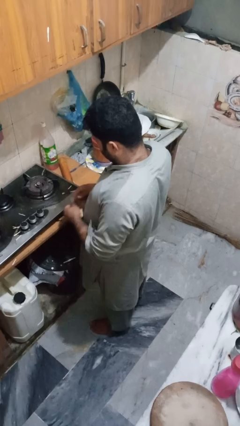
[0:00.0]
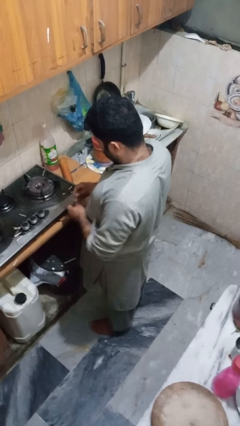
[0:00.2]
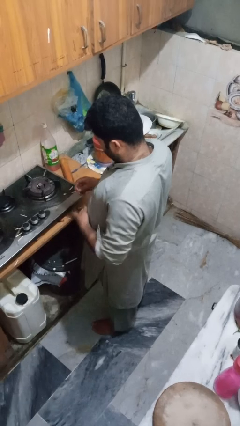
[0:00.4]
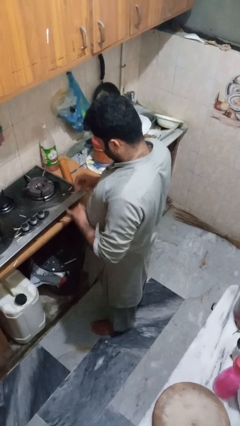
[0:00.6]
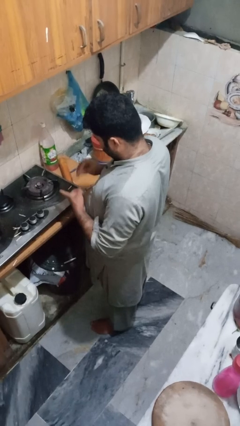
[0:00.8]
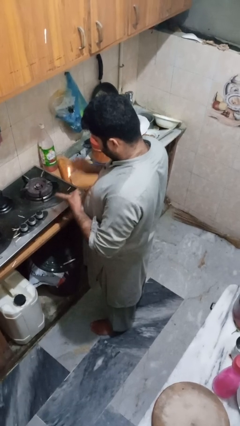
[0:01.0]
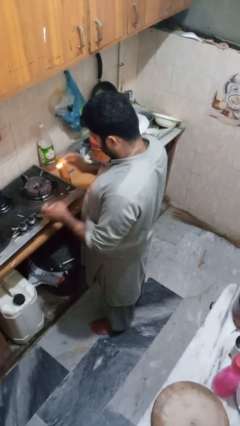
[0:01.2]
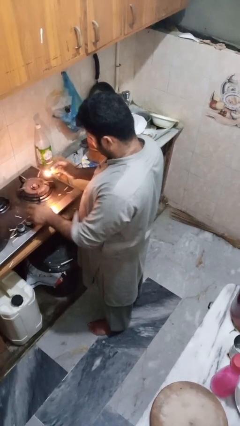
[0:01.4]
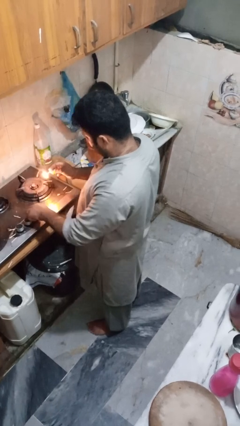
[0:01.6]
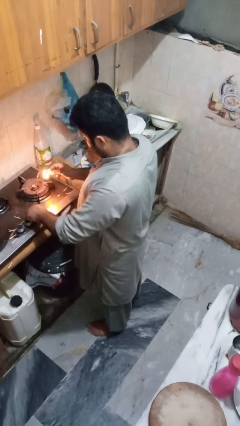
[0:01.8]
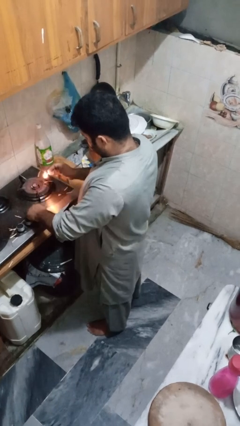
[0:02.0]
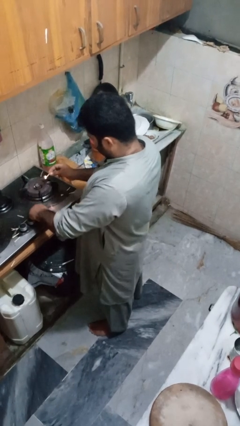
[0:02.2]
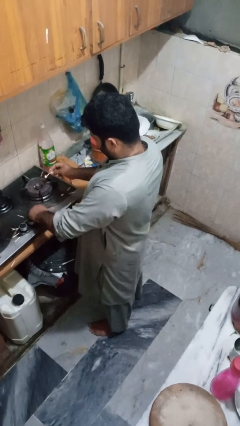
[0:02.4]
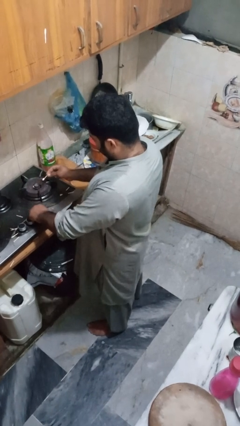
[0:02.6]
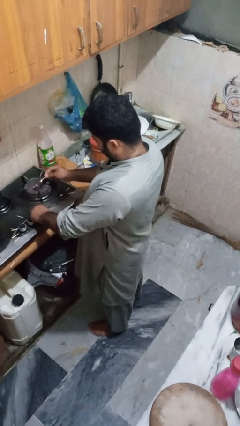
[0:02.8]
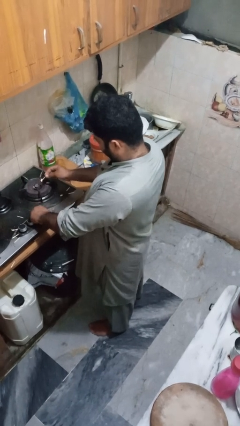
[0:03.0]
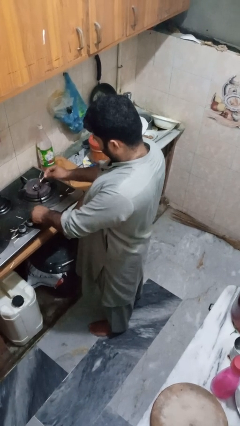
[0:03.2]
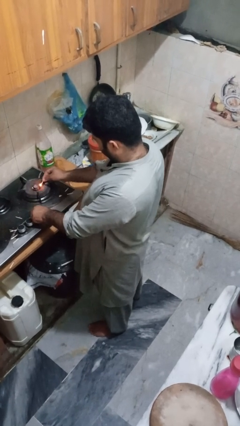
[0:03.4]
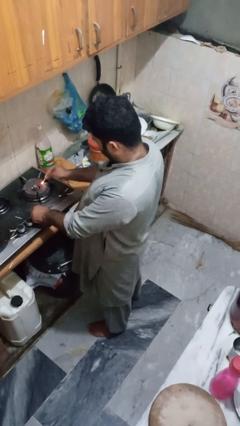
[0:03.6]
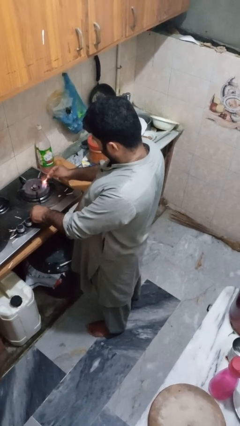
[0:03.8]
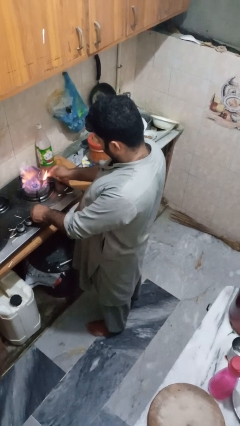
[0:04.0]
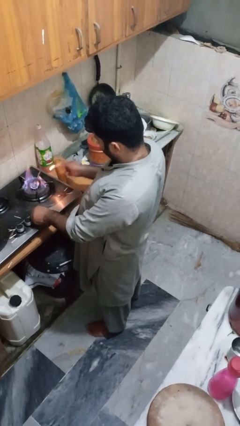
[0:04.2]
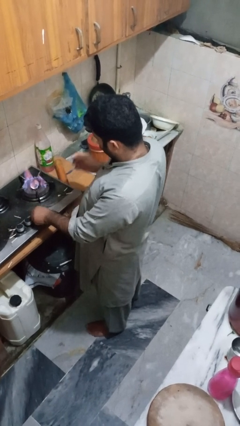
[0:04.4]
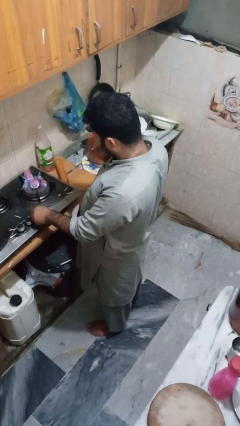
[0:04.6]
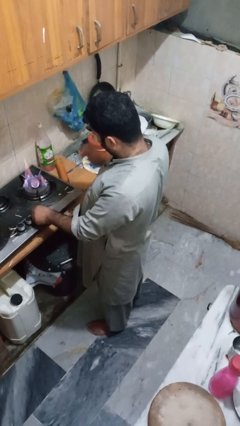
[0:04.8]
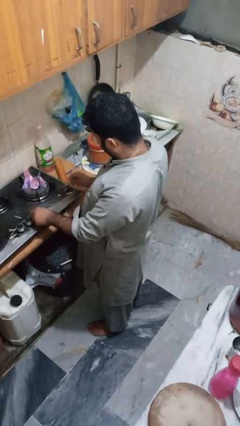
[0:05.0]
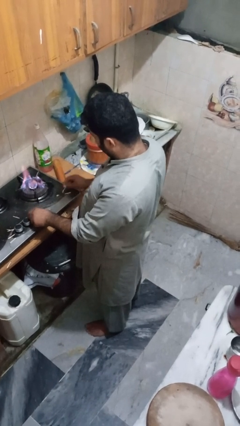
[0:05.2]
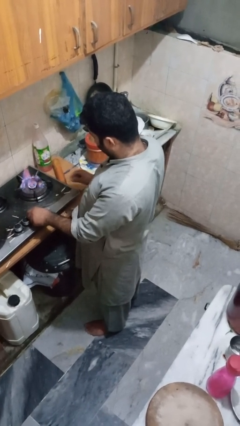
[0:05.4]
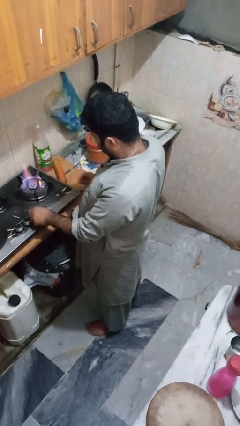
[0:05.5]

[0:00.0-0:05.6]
person turns on stovetop

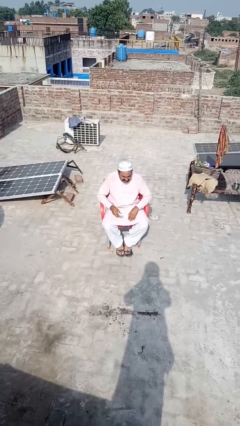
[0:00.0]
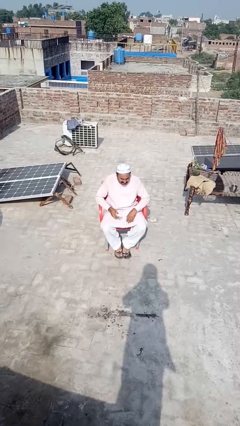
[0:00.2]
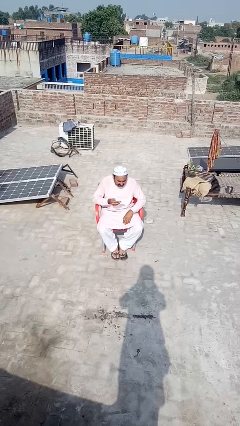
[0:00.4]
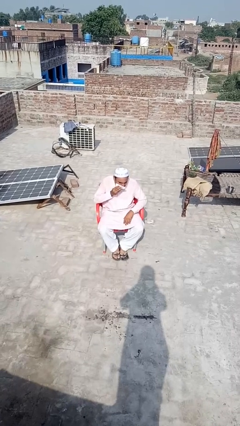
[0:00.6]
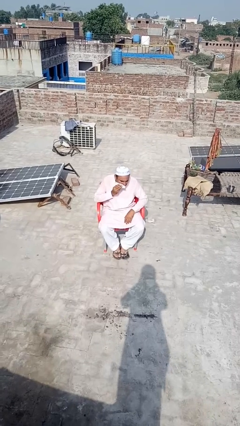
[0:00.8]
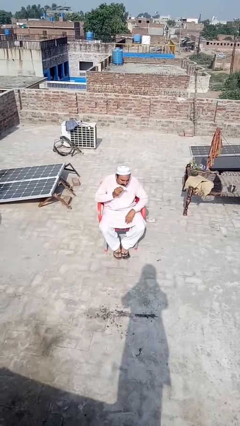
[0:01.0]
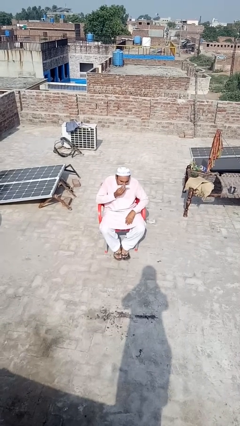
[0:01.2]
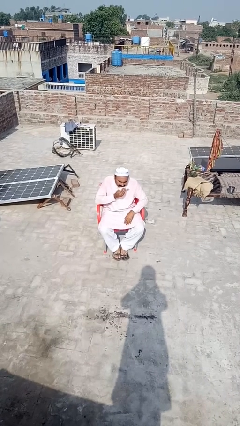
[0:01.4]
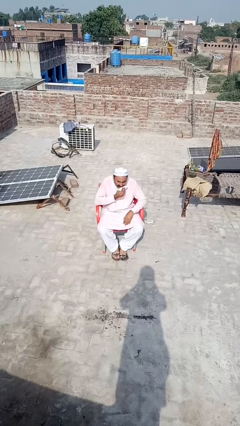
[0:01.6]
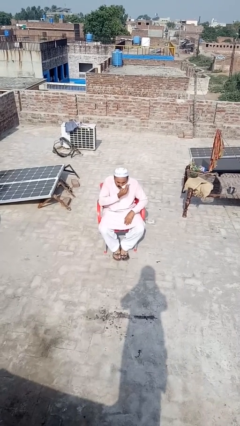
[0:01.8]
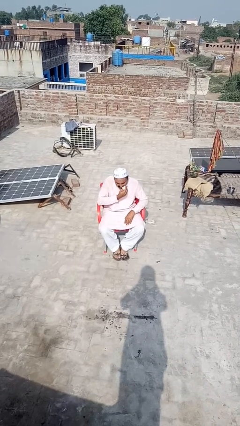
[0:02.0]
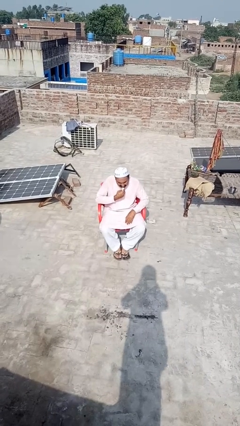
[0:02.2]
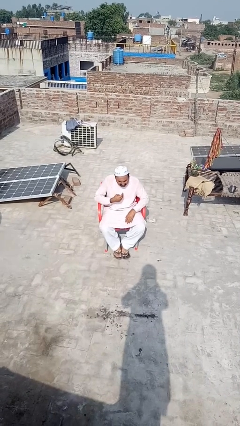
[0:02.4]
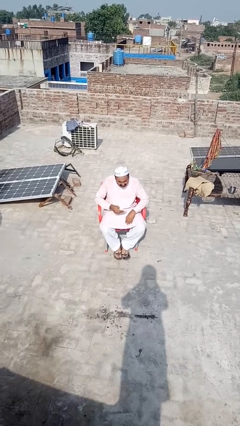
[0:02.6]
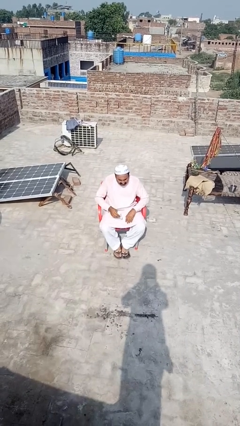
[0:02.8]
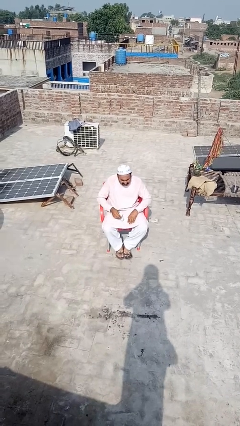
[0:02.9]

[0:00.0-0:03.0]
person wipes mouth with napkin

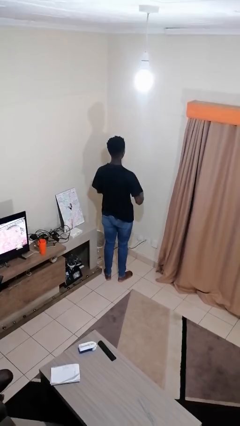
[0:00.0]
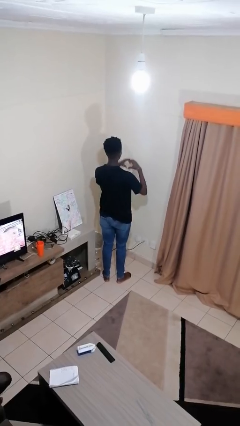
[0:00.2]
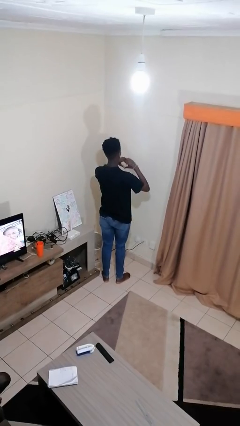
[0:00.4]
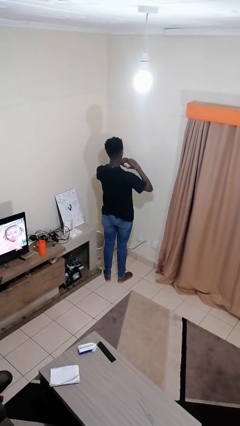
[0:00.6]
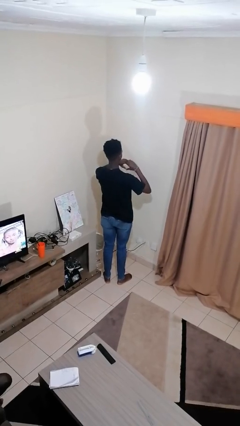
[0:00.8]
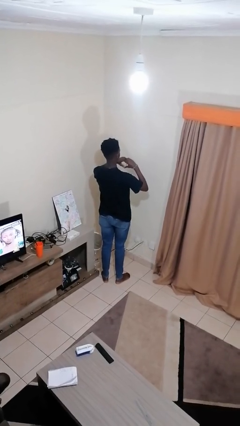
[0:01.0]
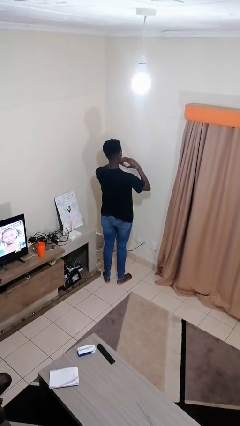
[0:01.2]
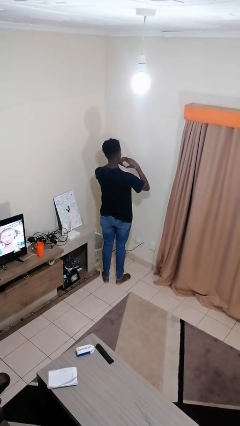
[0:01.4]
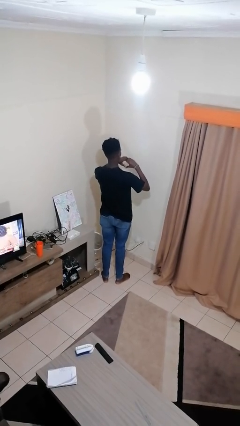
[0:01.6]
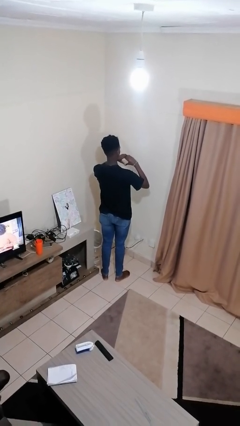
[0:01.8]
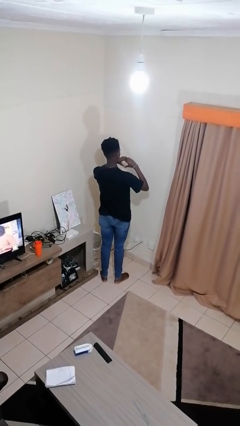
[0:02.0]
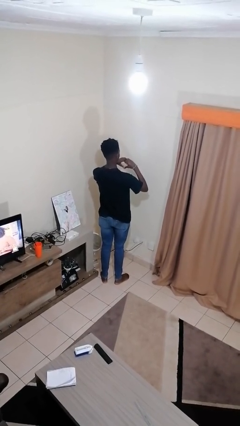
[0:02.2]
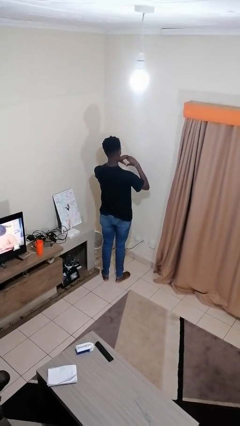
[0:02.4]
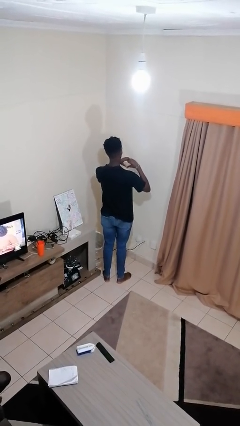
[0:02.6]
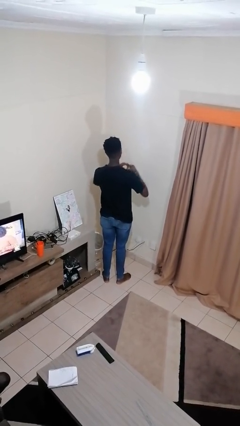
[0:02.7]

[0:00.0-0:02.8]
person gestures heart

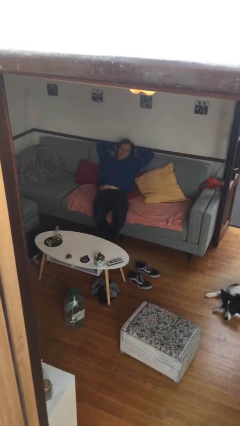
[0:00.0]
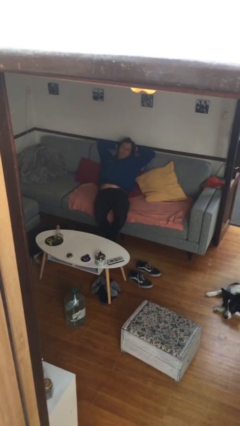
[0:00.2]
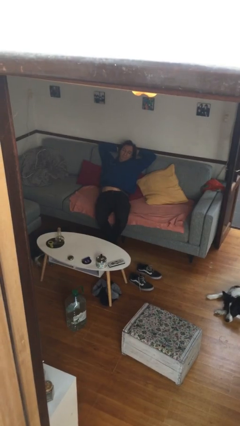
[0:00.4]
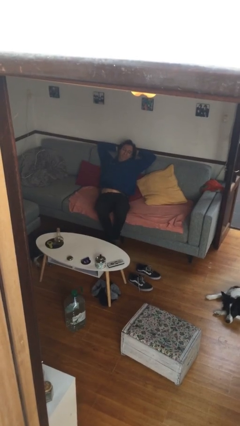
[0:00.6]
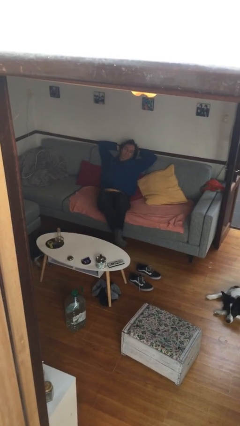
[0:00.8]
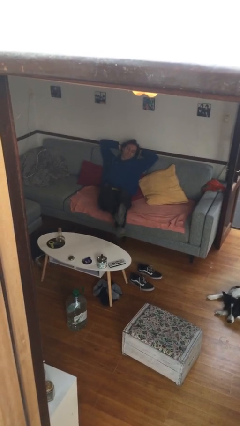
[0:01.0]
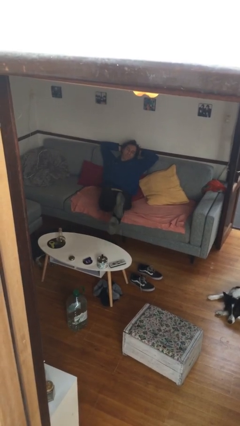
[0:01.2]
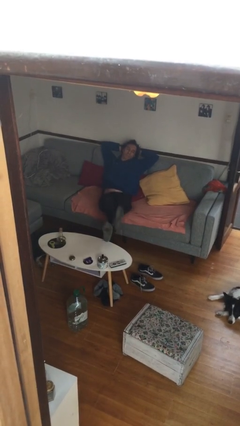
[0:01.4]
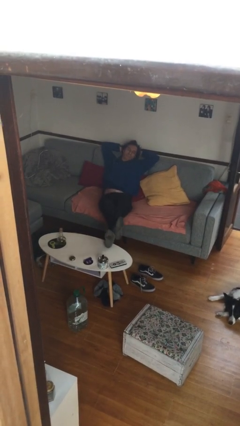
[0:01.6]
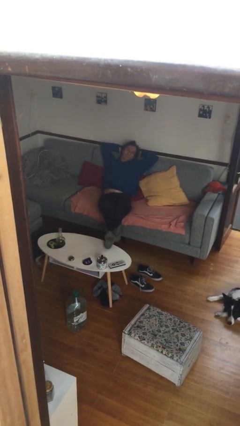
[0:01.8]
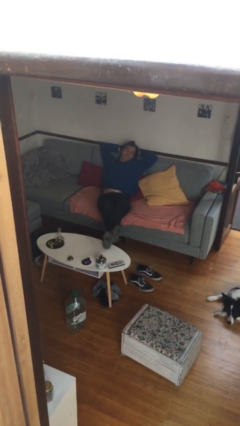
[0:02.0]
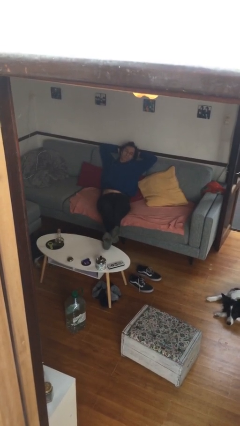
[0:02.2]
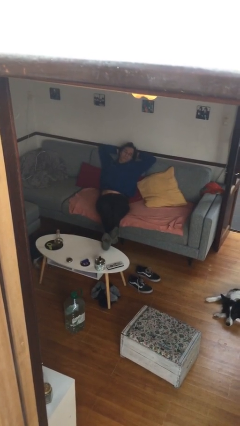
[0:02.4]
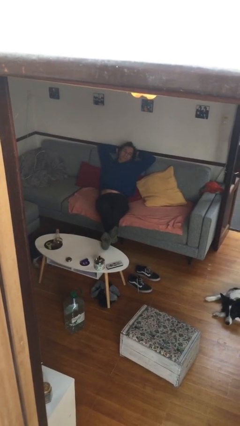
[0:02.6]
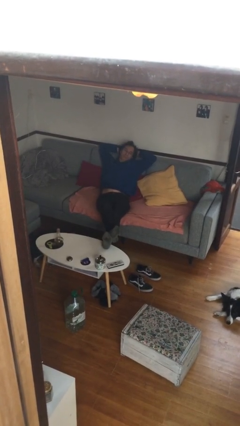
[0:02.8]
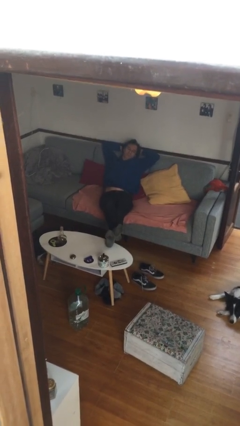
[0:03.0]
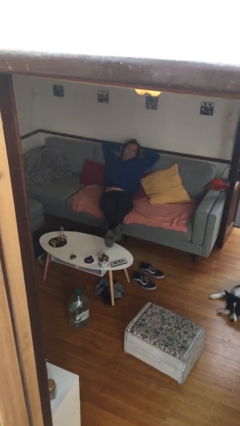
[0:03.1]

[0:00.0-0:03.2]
person puts feet up

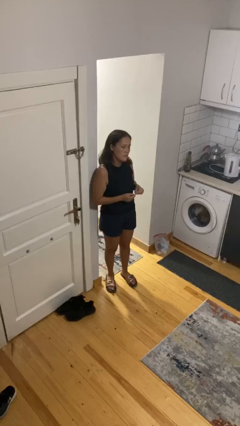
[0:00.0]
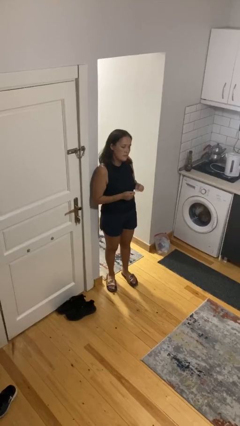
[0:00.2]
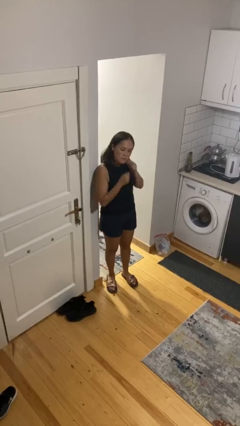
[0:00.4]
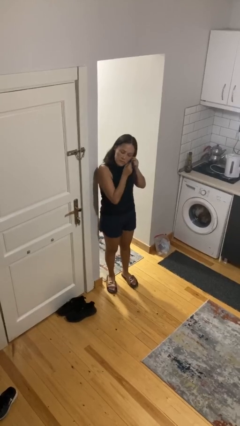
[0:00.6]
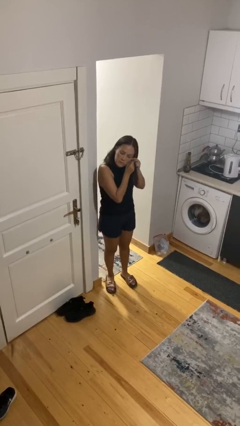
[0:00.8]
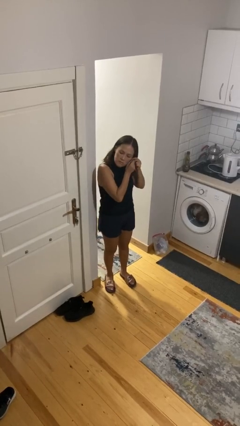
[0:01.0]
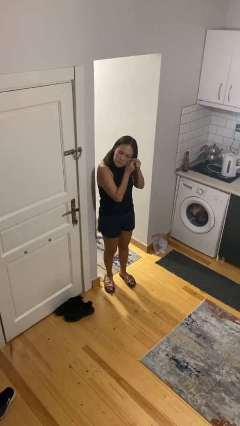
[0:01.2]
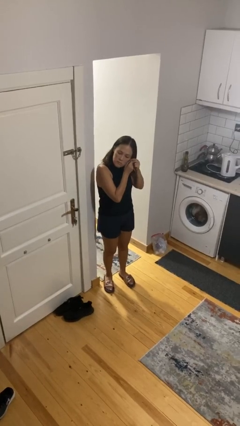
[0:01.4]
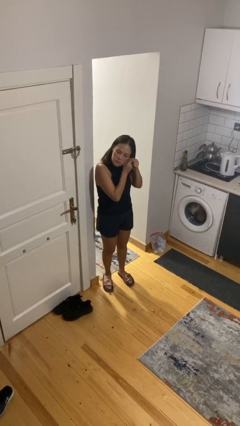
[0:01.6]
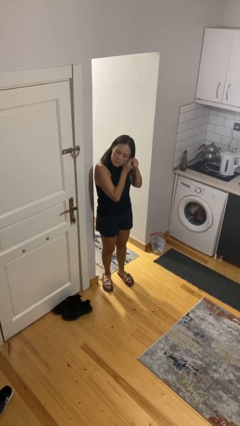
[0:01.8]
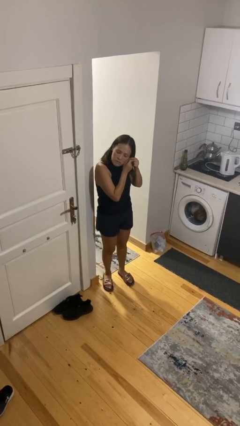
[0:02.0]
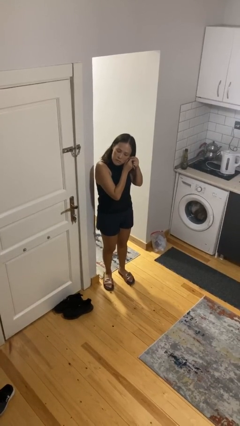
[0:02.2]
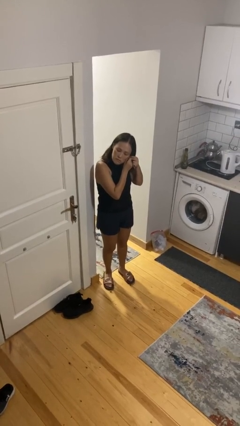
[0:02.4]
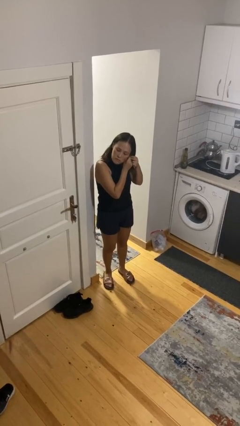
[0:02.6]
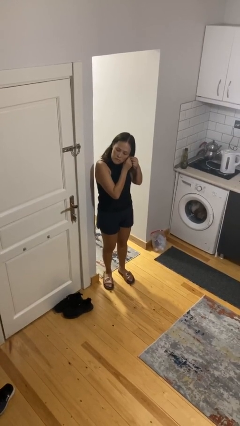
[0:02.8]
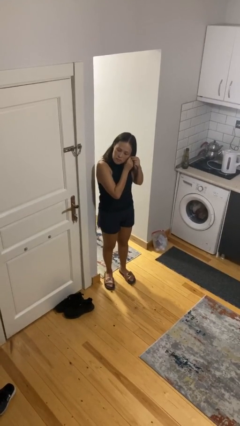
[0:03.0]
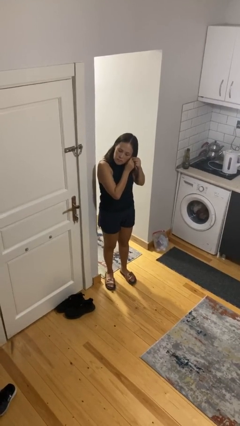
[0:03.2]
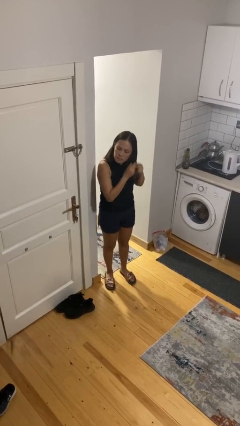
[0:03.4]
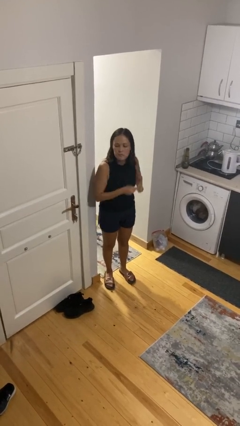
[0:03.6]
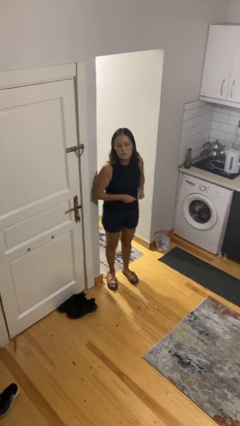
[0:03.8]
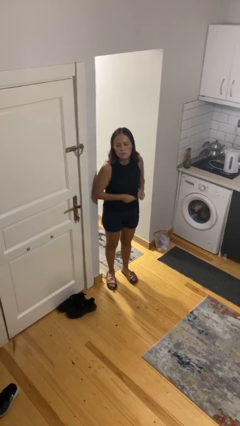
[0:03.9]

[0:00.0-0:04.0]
person puts on earrings
